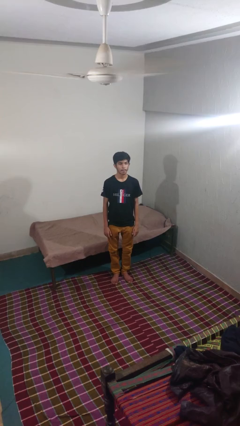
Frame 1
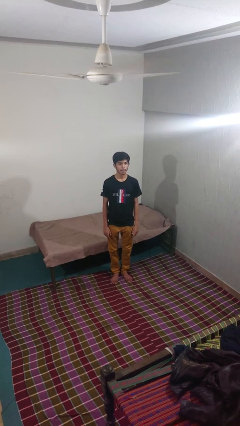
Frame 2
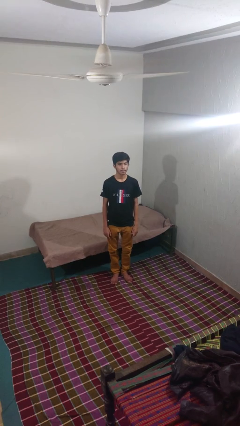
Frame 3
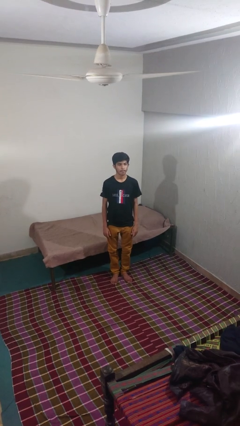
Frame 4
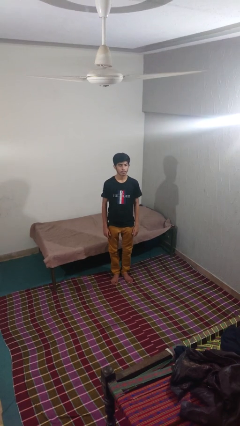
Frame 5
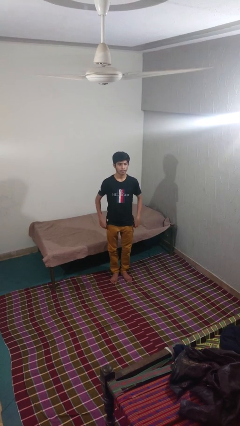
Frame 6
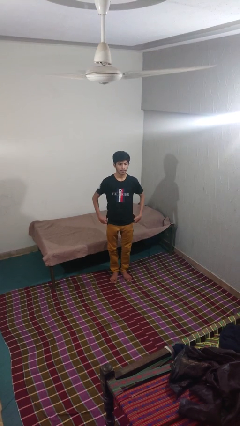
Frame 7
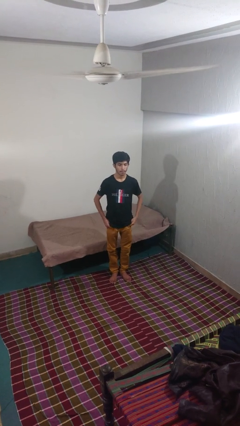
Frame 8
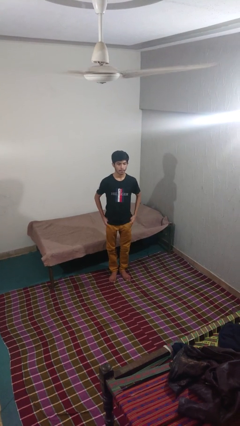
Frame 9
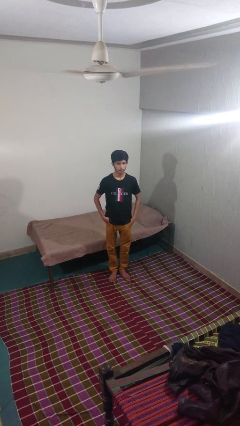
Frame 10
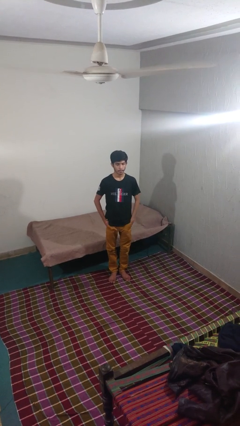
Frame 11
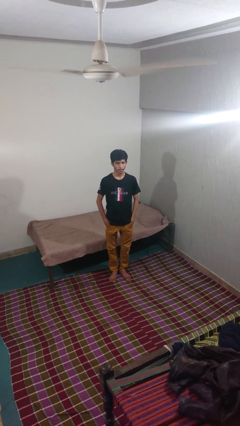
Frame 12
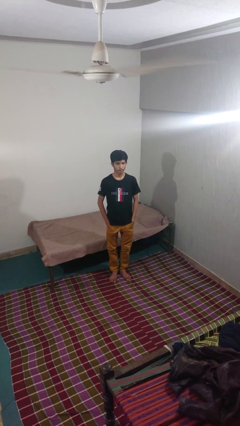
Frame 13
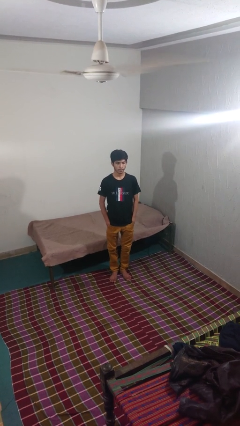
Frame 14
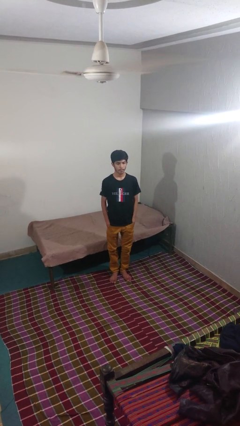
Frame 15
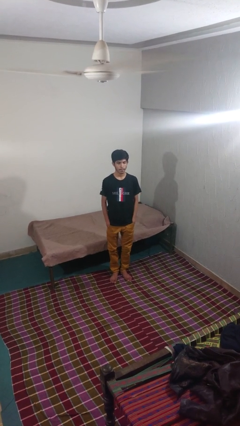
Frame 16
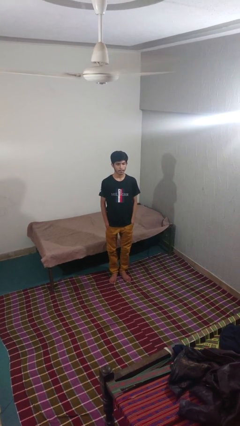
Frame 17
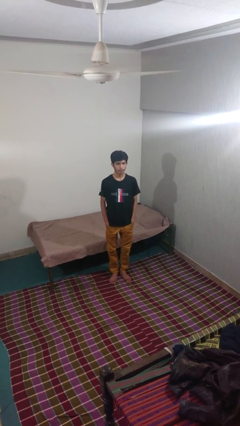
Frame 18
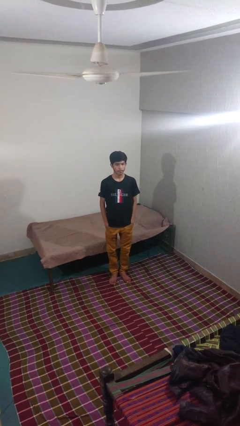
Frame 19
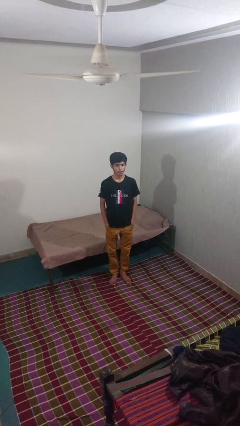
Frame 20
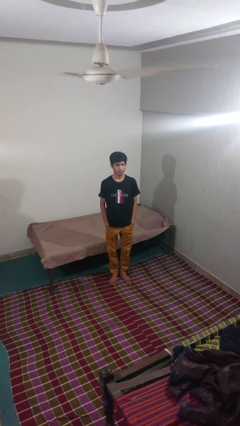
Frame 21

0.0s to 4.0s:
person puts hands in back pockets

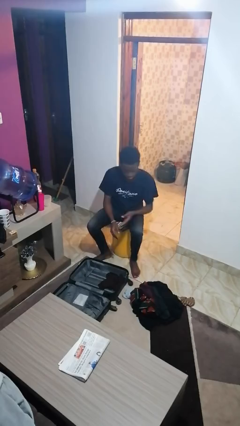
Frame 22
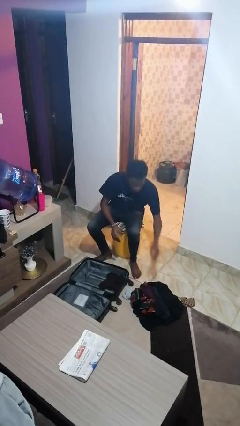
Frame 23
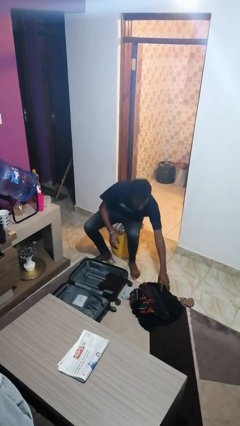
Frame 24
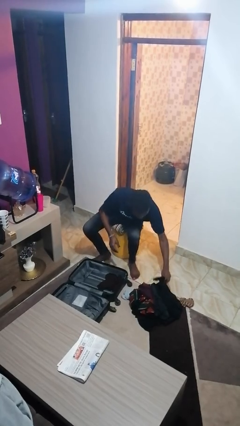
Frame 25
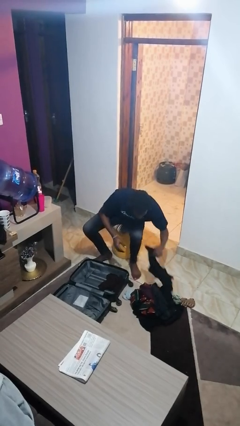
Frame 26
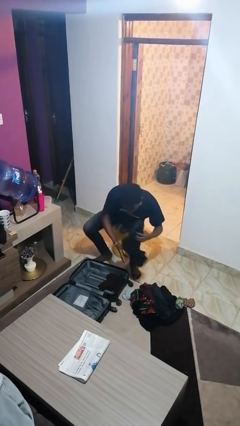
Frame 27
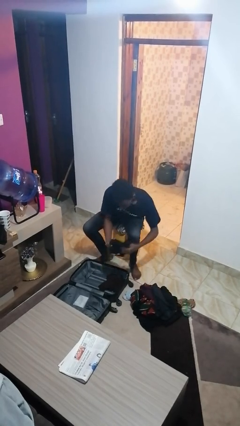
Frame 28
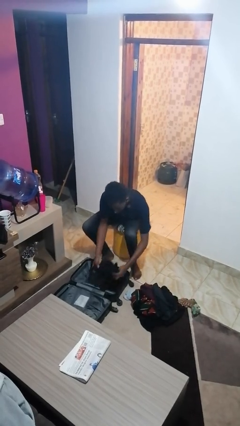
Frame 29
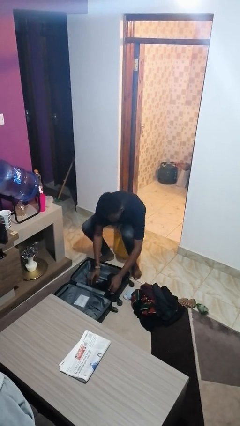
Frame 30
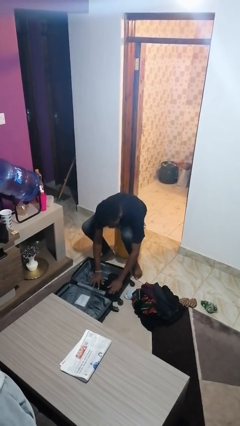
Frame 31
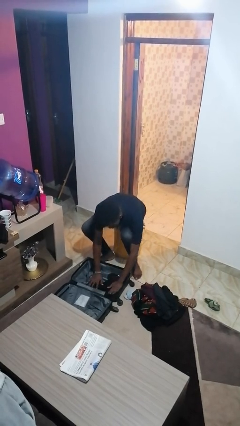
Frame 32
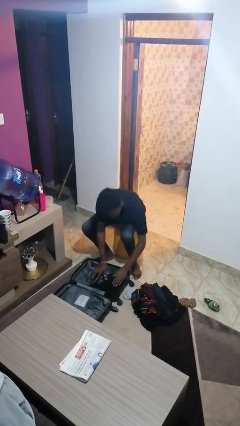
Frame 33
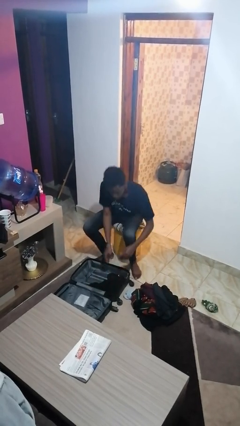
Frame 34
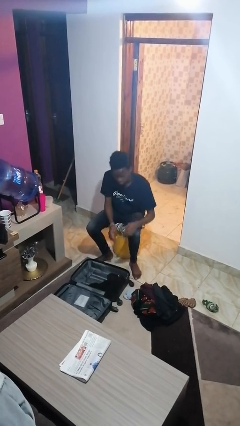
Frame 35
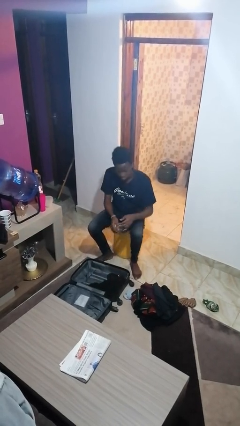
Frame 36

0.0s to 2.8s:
person loads clothes into suitcase

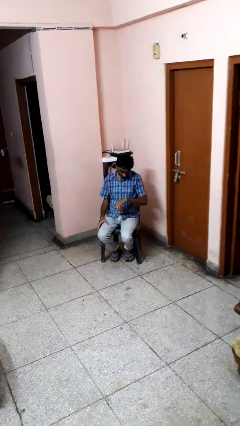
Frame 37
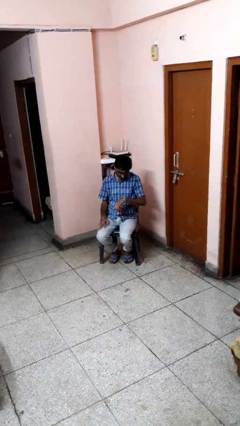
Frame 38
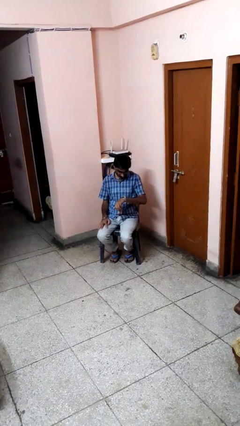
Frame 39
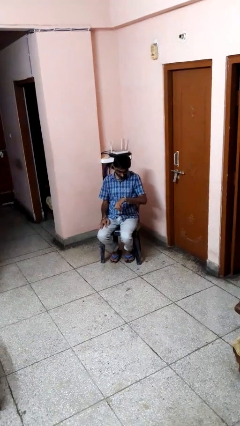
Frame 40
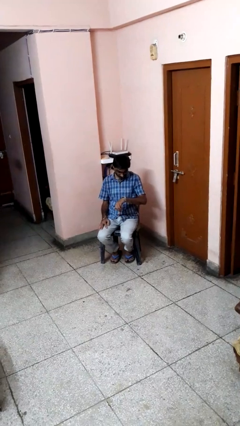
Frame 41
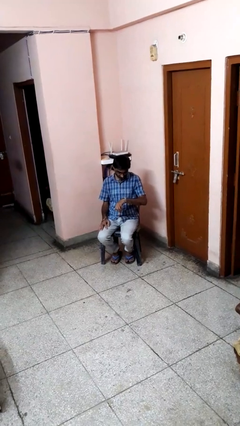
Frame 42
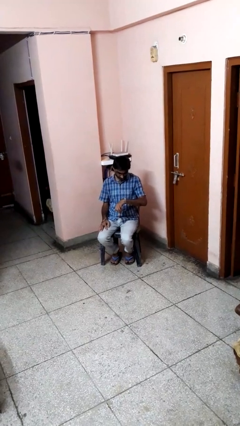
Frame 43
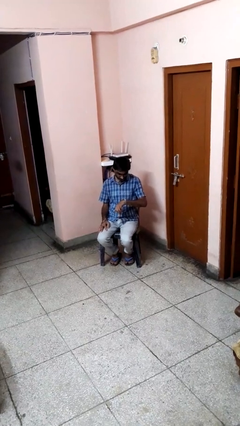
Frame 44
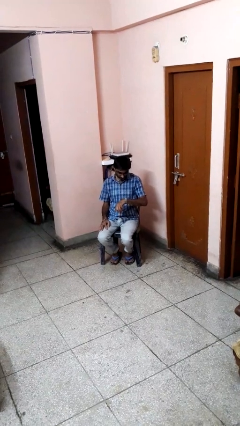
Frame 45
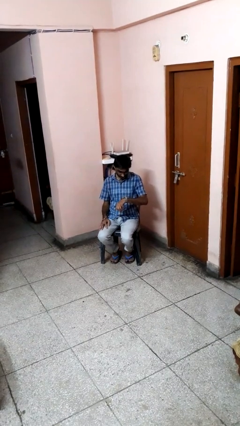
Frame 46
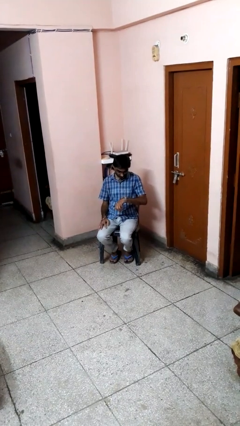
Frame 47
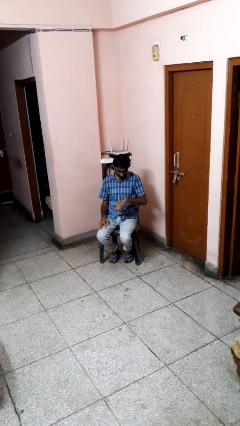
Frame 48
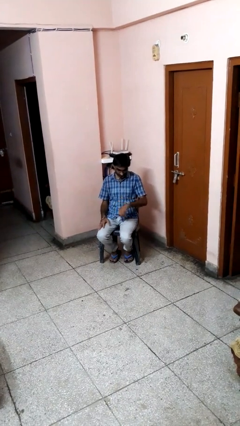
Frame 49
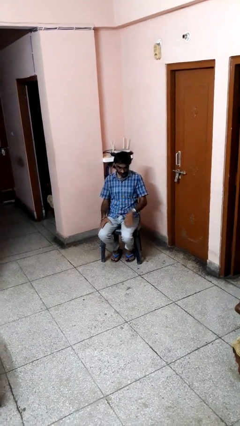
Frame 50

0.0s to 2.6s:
person looks at wristwatch

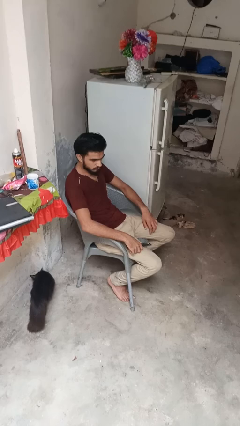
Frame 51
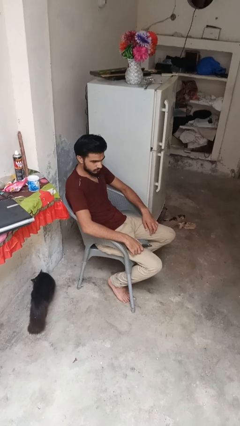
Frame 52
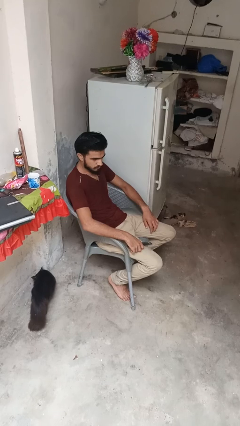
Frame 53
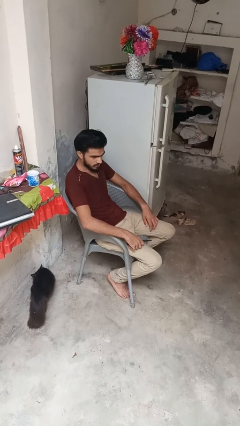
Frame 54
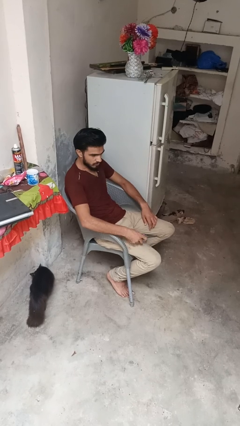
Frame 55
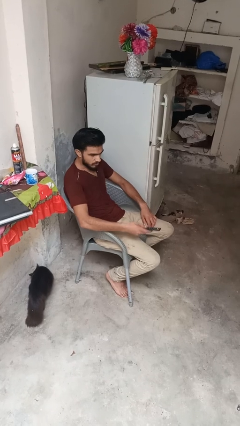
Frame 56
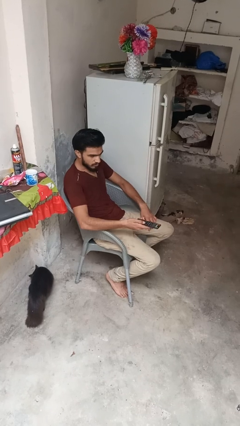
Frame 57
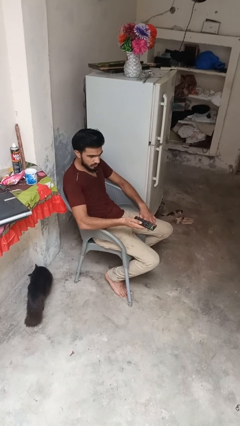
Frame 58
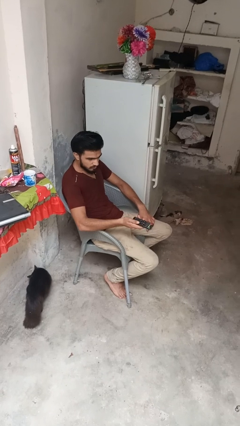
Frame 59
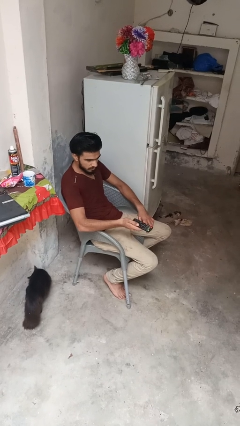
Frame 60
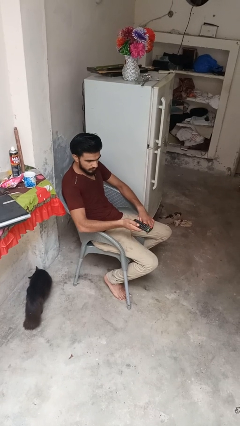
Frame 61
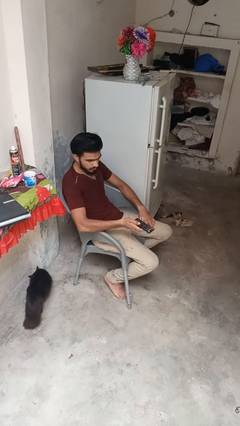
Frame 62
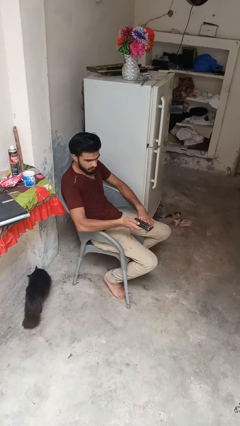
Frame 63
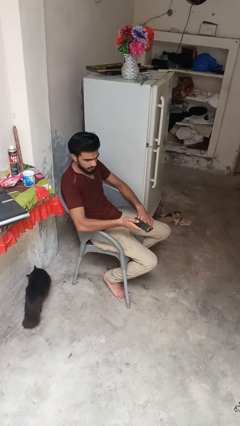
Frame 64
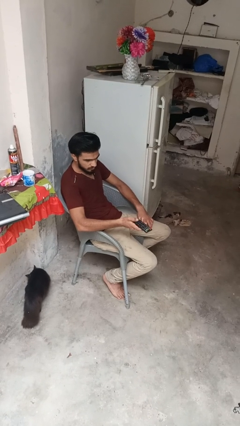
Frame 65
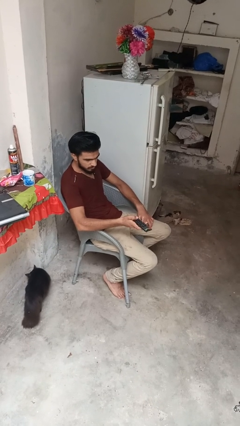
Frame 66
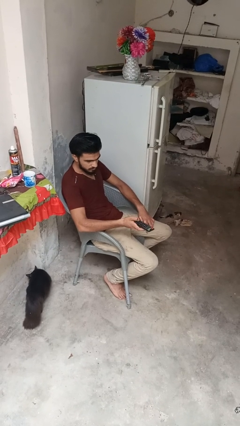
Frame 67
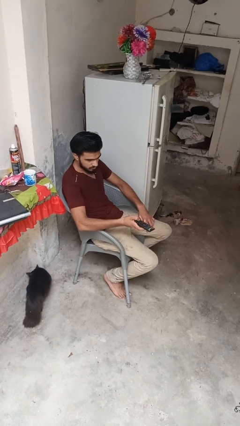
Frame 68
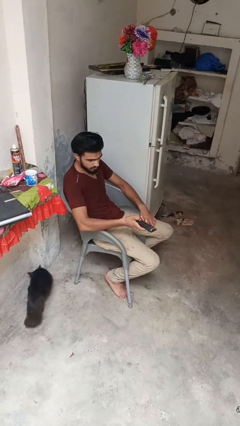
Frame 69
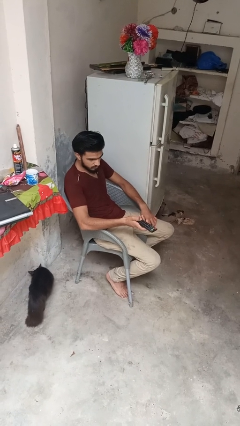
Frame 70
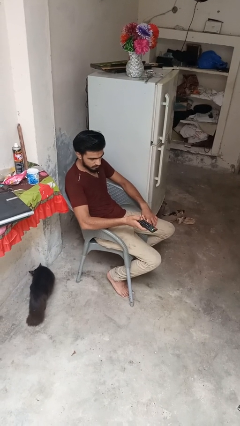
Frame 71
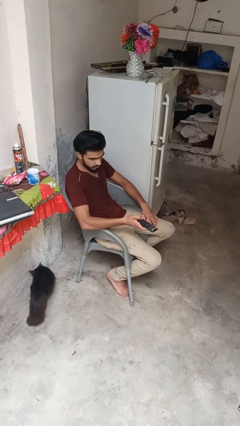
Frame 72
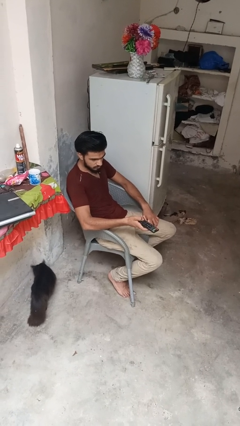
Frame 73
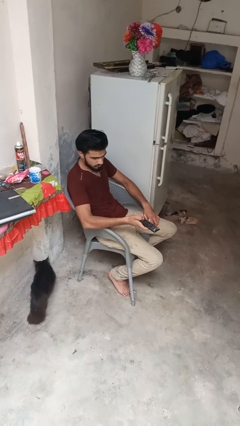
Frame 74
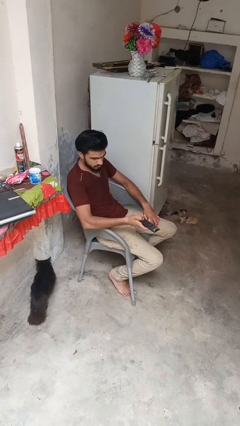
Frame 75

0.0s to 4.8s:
person uses television remote

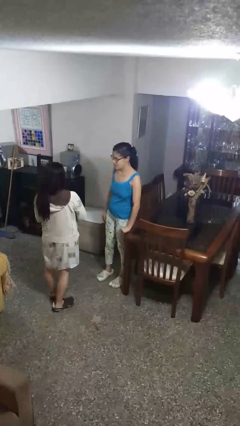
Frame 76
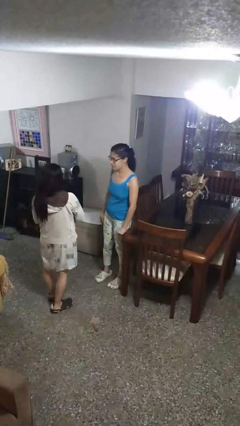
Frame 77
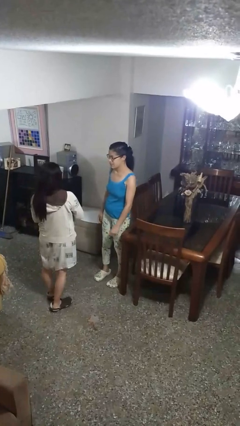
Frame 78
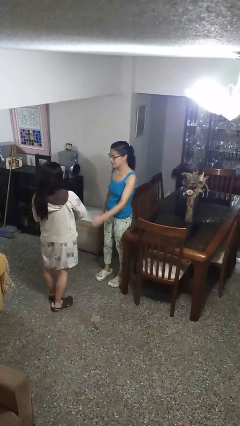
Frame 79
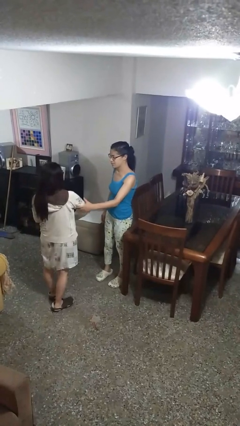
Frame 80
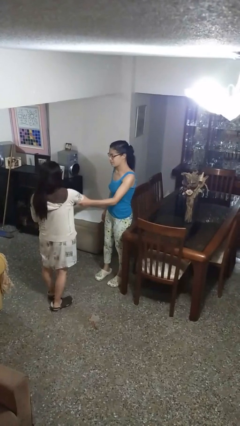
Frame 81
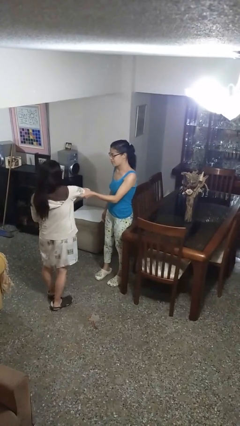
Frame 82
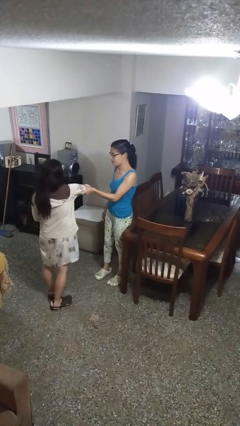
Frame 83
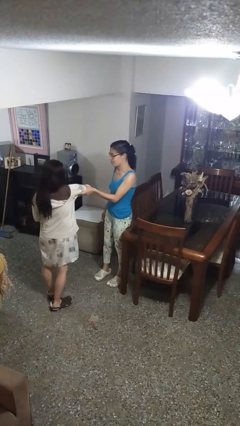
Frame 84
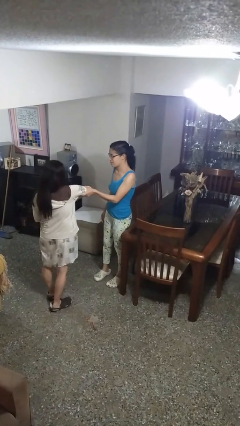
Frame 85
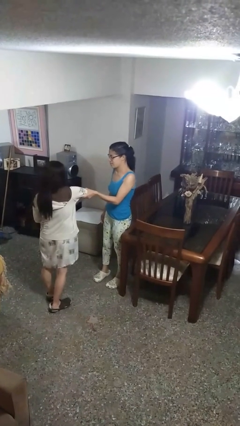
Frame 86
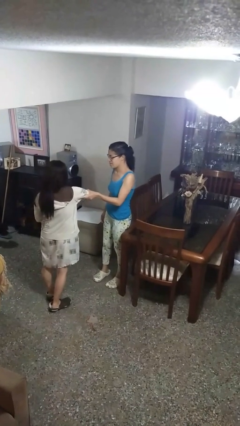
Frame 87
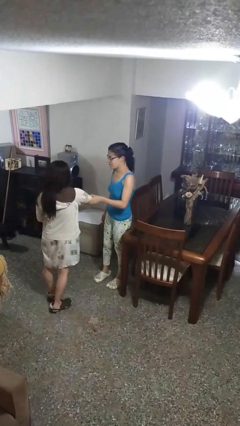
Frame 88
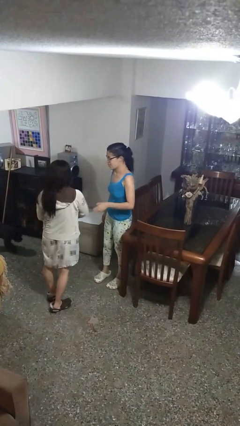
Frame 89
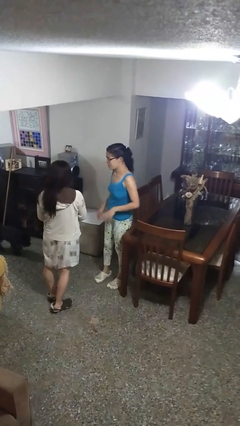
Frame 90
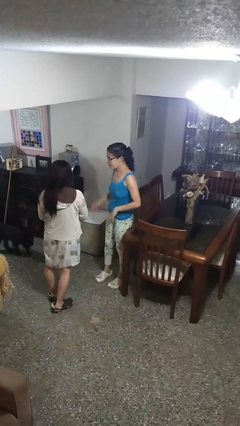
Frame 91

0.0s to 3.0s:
person grabs person by bicep

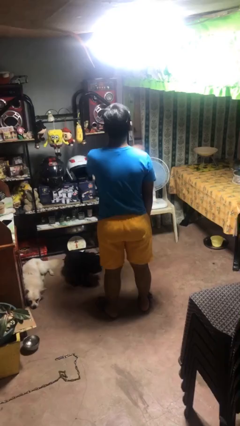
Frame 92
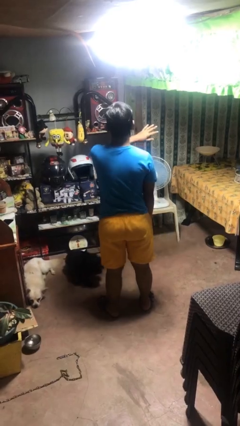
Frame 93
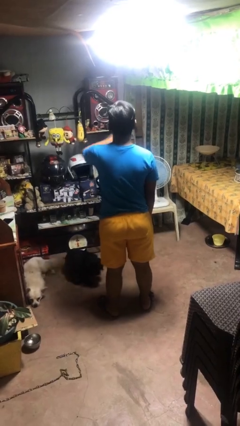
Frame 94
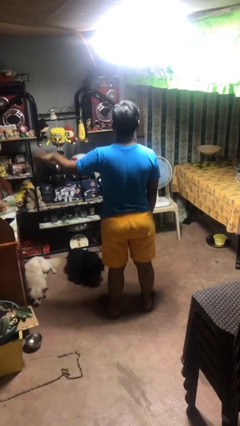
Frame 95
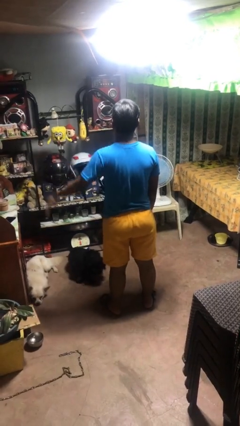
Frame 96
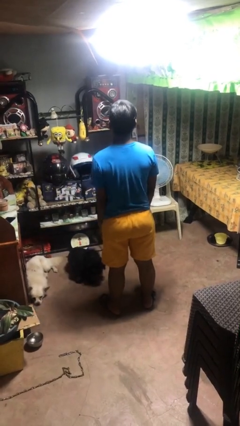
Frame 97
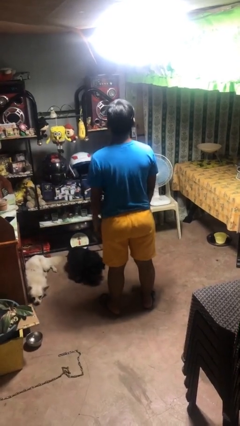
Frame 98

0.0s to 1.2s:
person gestures swipe left
